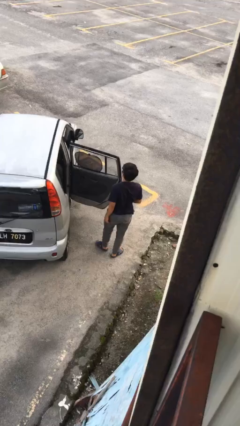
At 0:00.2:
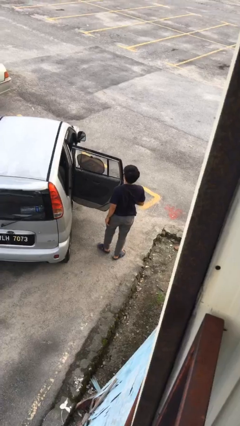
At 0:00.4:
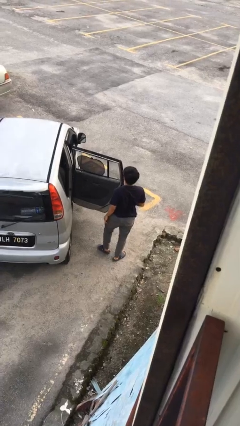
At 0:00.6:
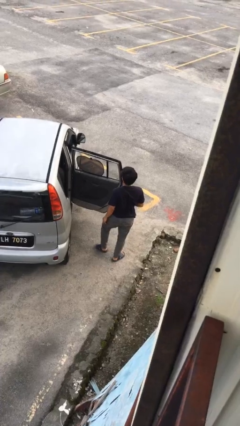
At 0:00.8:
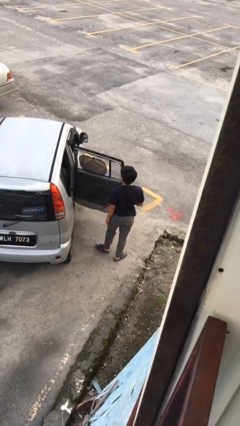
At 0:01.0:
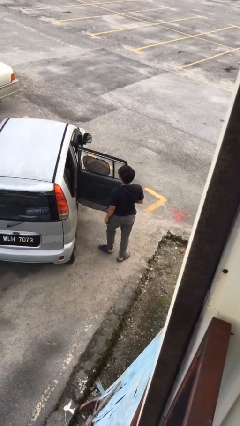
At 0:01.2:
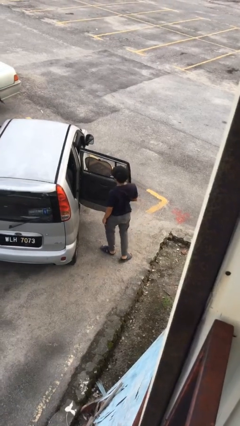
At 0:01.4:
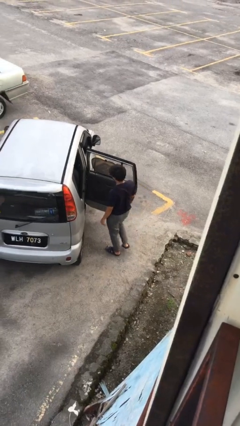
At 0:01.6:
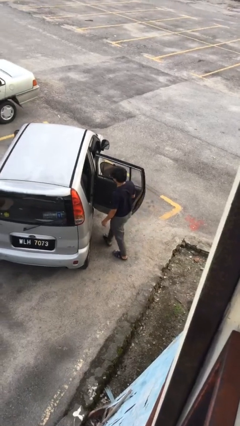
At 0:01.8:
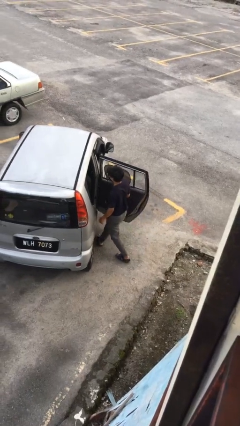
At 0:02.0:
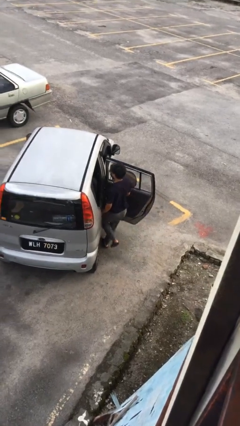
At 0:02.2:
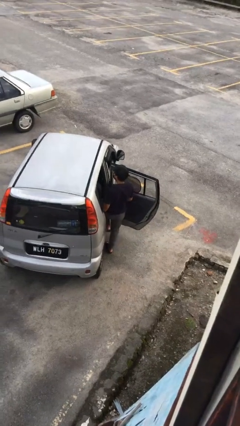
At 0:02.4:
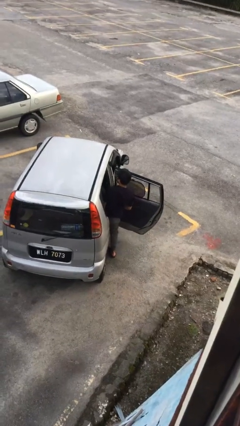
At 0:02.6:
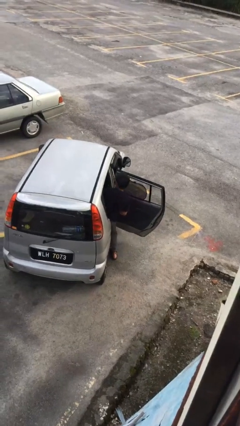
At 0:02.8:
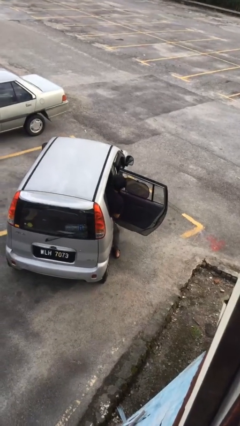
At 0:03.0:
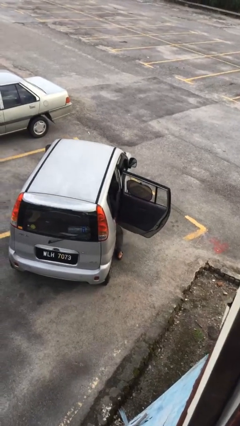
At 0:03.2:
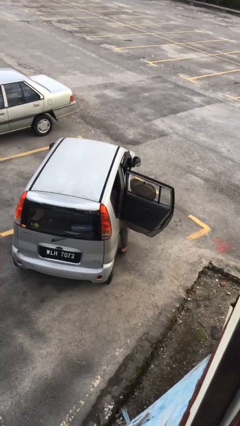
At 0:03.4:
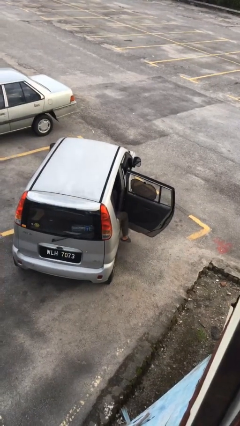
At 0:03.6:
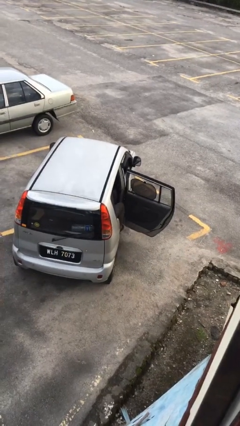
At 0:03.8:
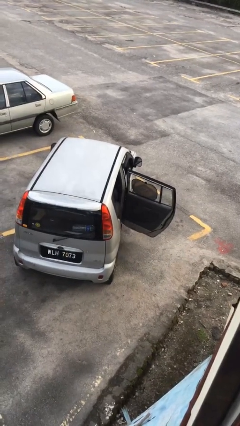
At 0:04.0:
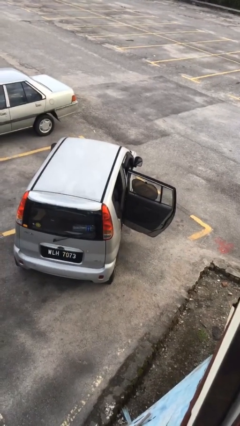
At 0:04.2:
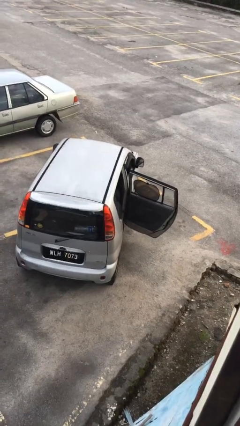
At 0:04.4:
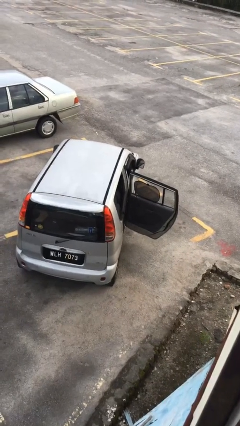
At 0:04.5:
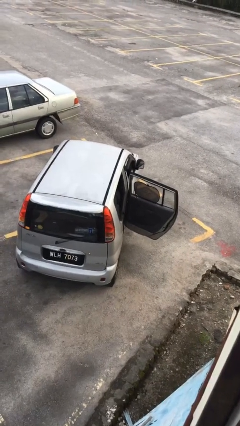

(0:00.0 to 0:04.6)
person enters car

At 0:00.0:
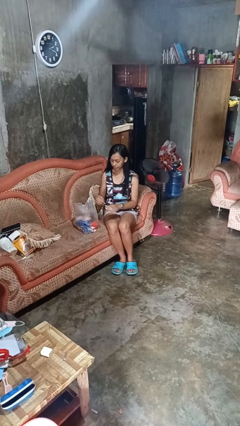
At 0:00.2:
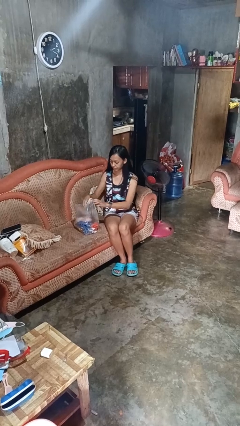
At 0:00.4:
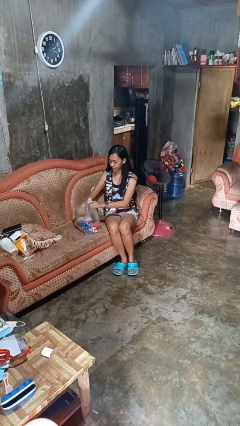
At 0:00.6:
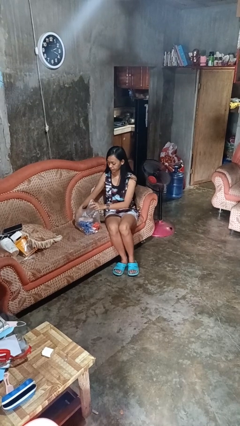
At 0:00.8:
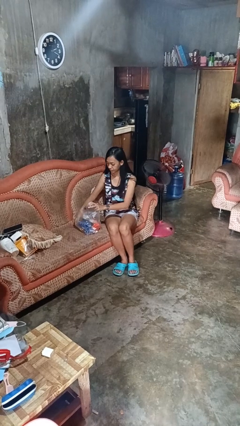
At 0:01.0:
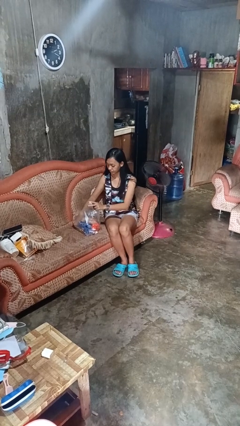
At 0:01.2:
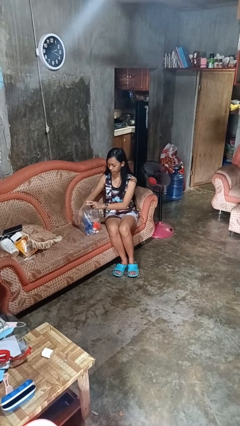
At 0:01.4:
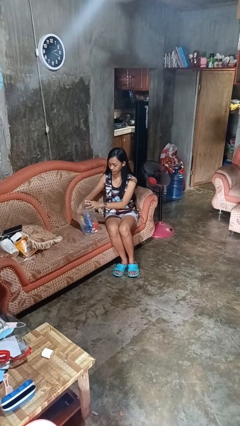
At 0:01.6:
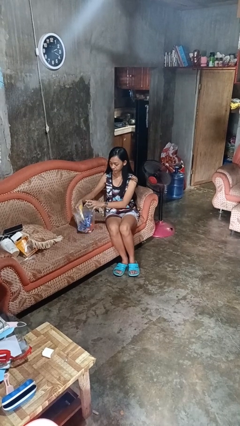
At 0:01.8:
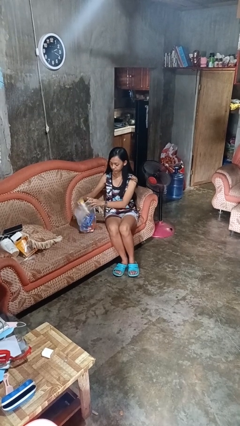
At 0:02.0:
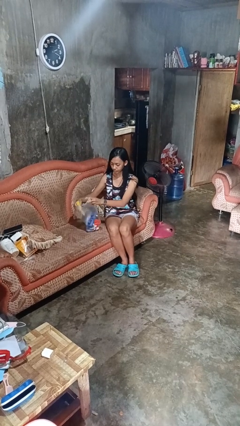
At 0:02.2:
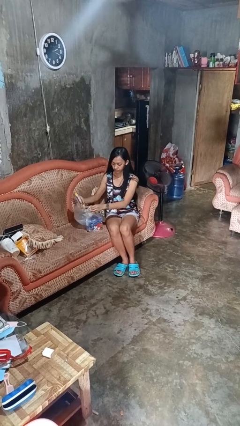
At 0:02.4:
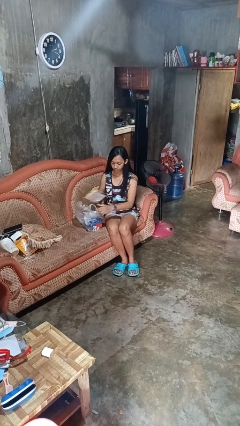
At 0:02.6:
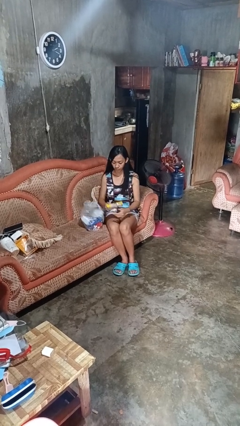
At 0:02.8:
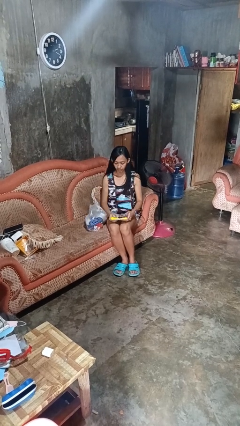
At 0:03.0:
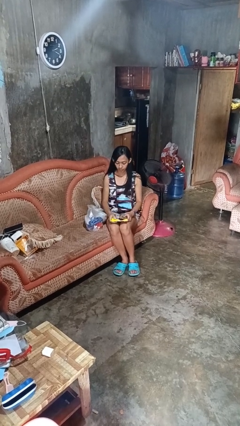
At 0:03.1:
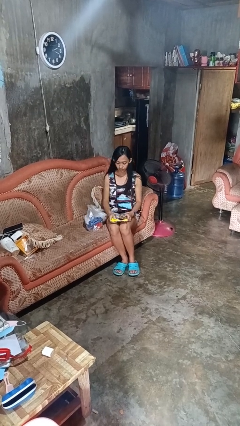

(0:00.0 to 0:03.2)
person takes object from bag

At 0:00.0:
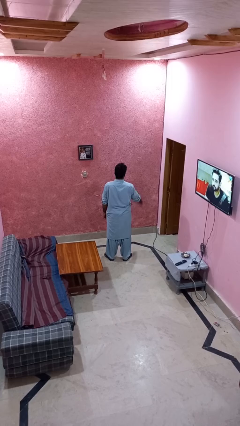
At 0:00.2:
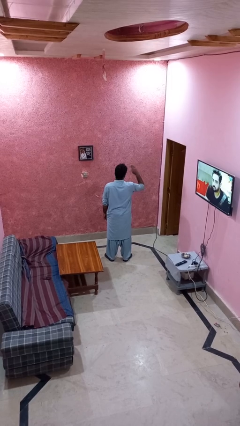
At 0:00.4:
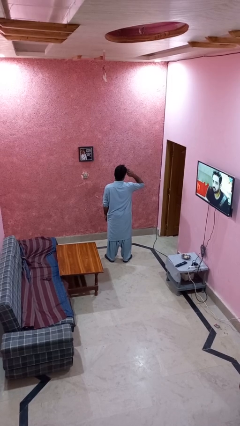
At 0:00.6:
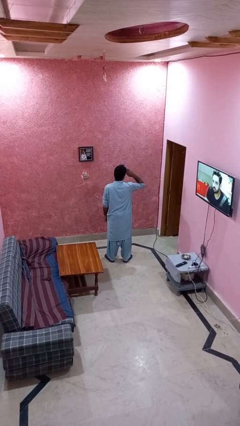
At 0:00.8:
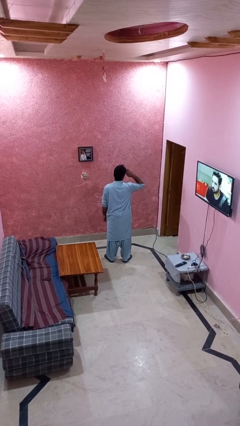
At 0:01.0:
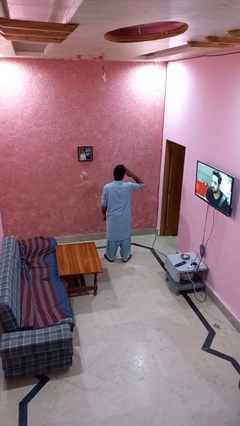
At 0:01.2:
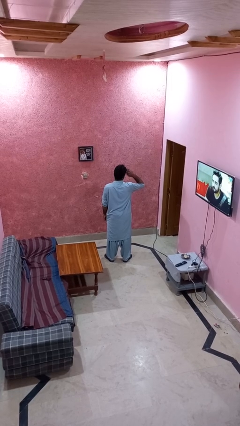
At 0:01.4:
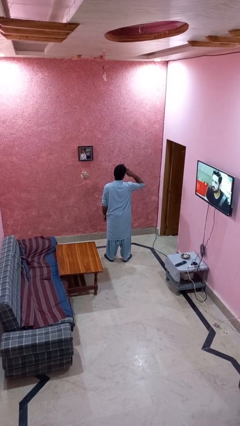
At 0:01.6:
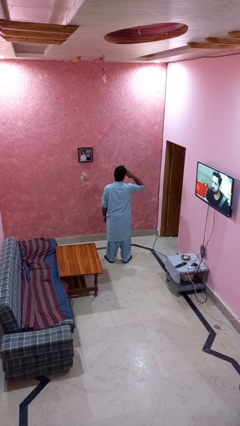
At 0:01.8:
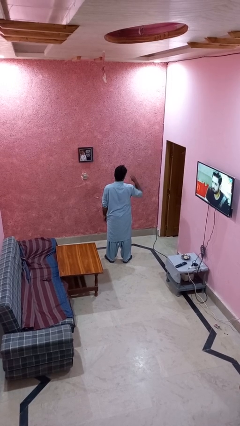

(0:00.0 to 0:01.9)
person salutes

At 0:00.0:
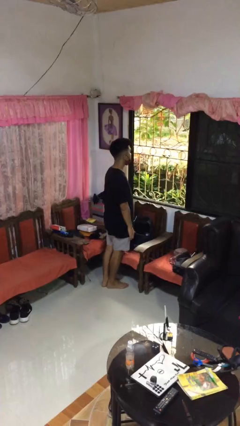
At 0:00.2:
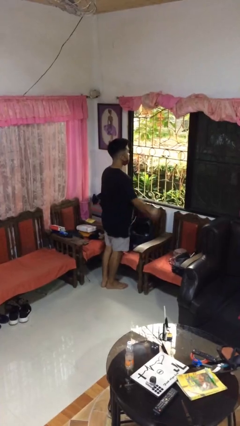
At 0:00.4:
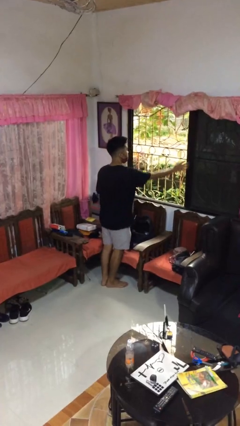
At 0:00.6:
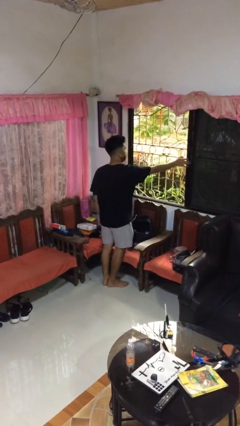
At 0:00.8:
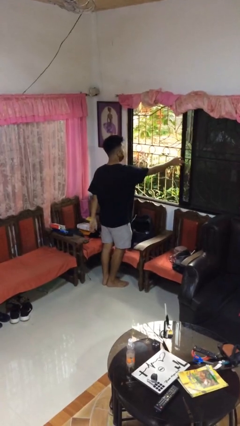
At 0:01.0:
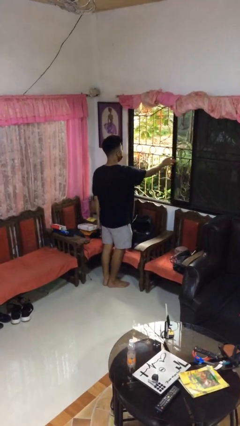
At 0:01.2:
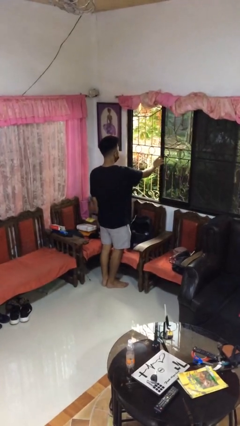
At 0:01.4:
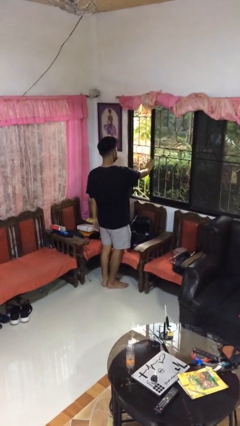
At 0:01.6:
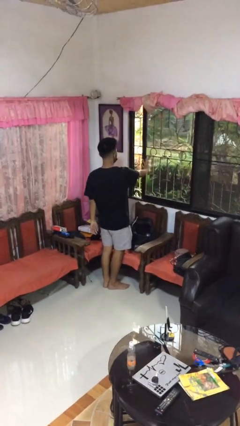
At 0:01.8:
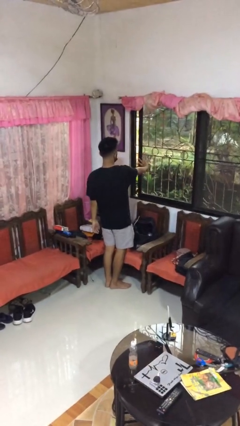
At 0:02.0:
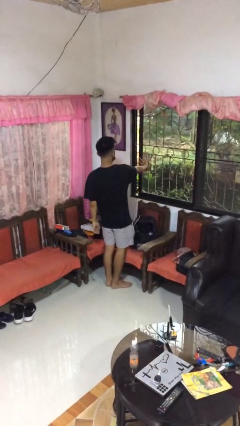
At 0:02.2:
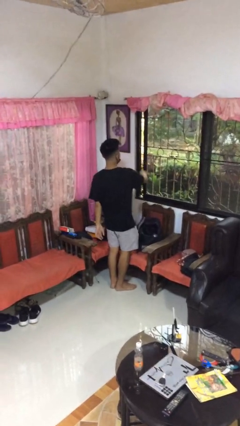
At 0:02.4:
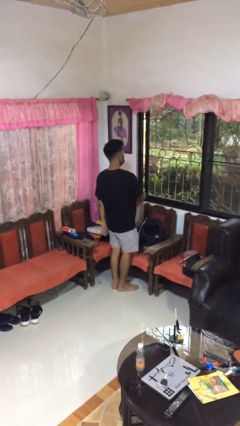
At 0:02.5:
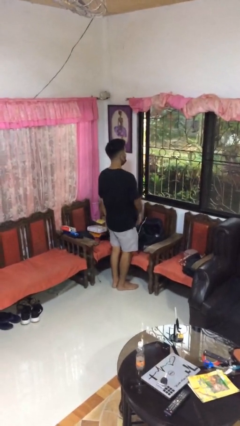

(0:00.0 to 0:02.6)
person closes home window

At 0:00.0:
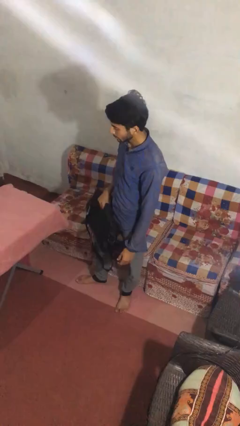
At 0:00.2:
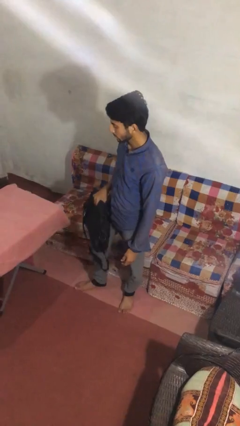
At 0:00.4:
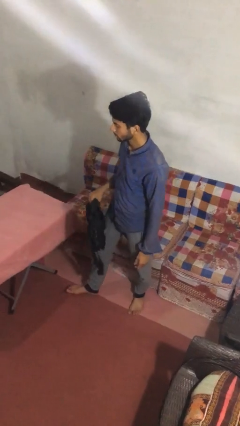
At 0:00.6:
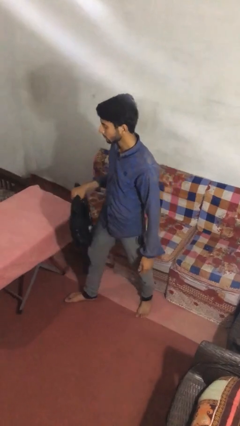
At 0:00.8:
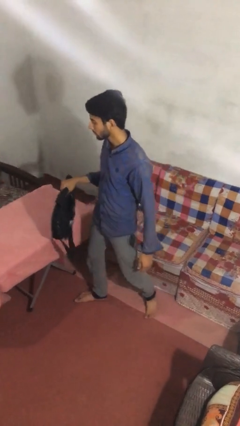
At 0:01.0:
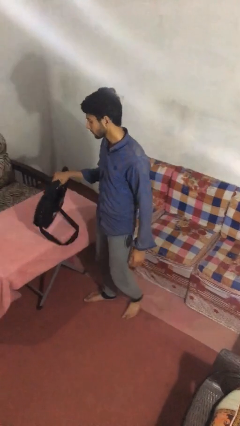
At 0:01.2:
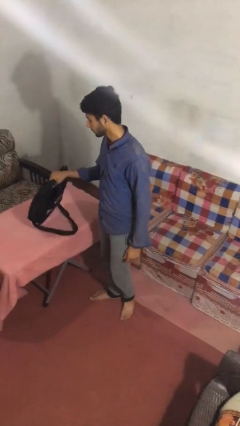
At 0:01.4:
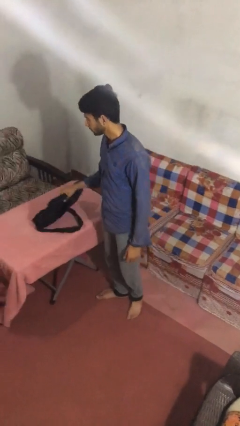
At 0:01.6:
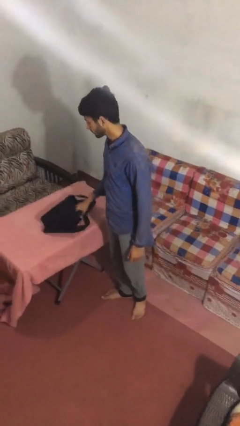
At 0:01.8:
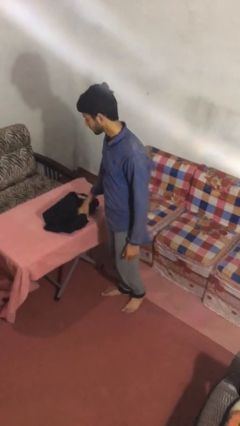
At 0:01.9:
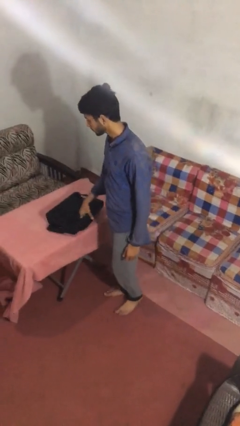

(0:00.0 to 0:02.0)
person puts down object on table

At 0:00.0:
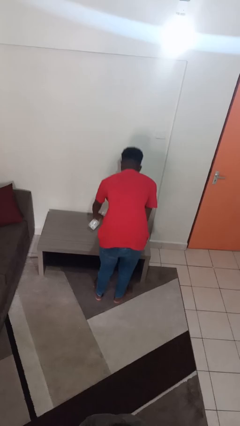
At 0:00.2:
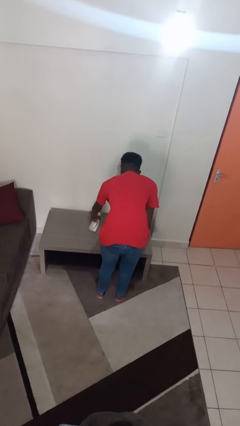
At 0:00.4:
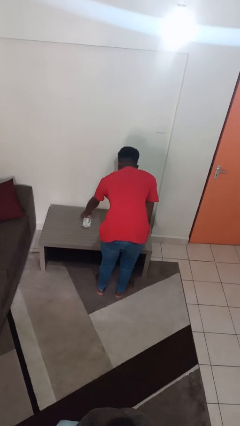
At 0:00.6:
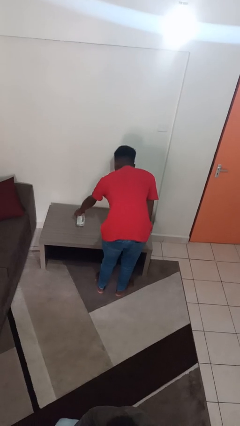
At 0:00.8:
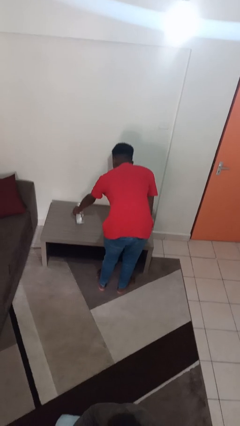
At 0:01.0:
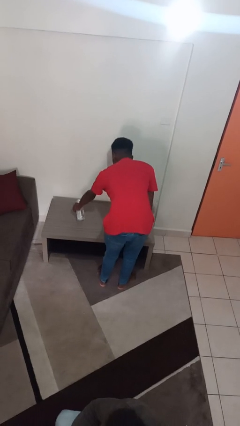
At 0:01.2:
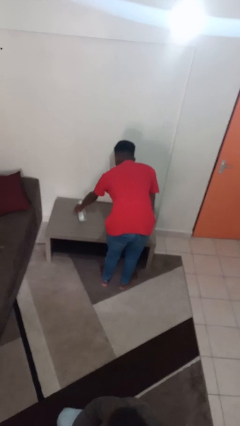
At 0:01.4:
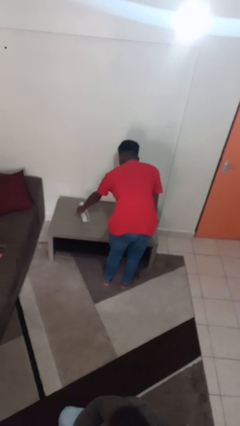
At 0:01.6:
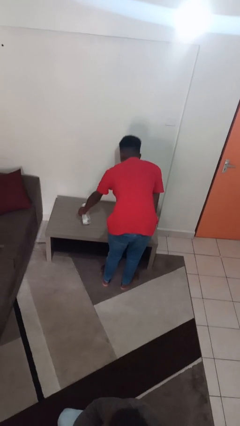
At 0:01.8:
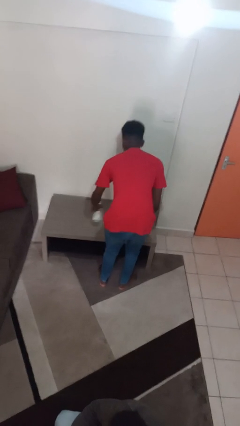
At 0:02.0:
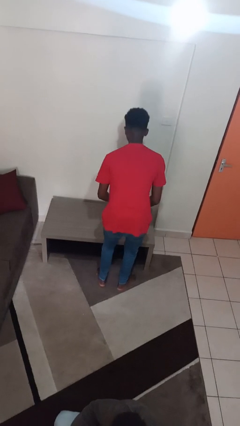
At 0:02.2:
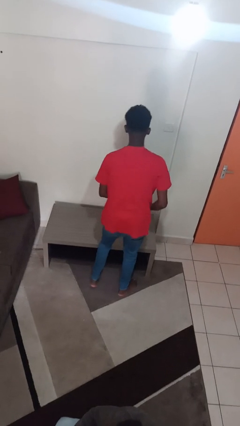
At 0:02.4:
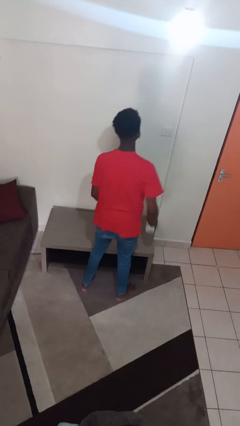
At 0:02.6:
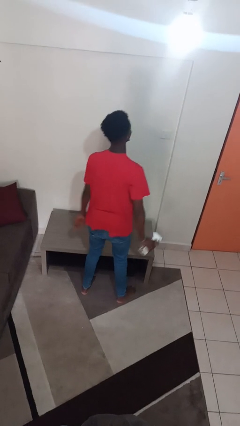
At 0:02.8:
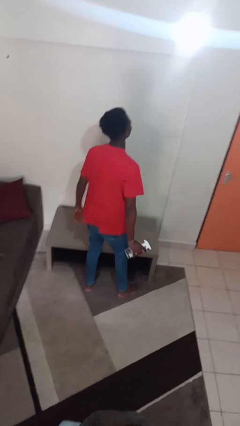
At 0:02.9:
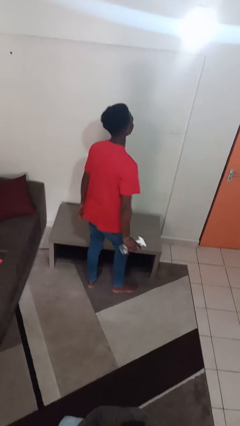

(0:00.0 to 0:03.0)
person sprays from bottle

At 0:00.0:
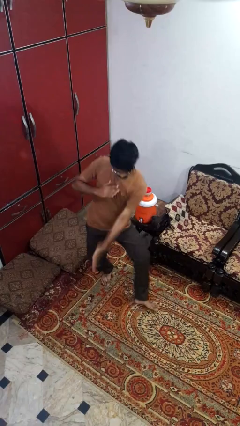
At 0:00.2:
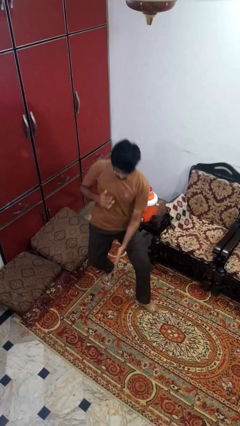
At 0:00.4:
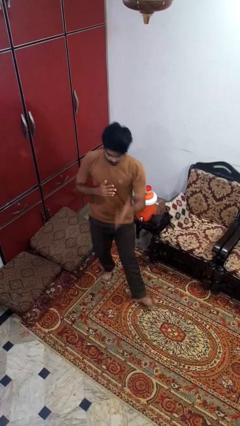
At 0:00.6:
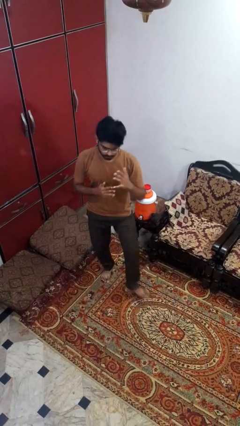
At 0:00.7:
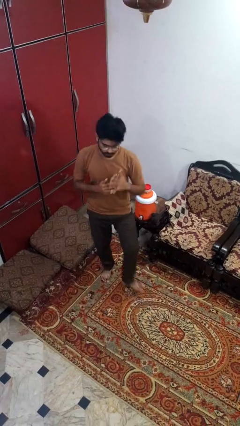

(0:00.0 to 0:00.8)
person karate chop
